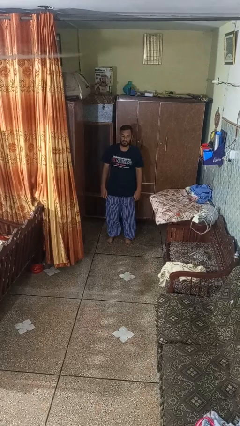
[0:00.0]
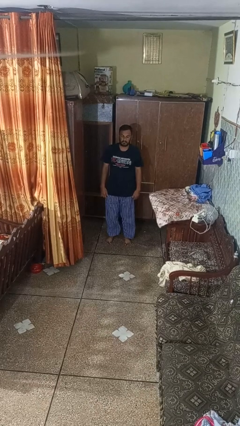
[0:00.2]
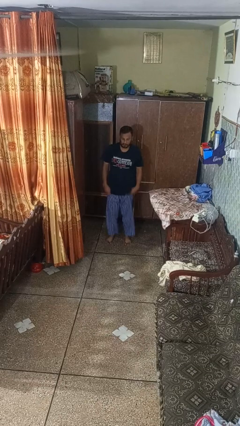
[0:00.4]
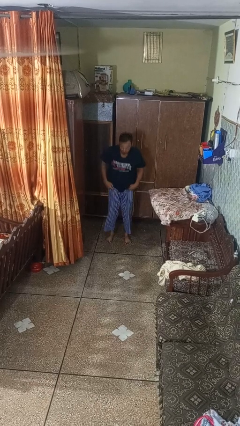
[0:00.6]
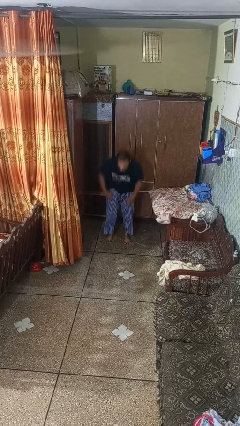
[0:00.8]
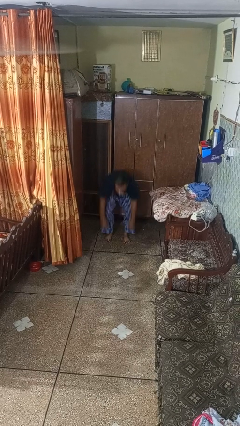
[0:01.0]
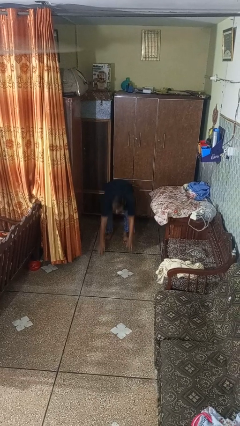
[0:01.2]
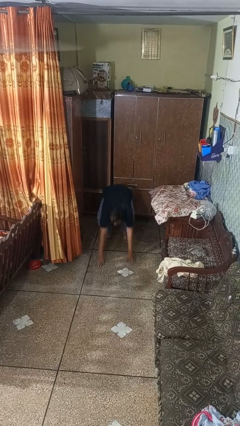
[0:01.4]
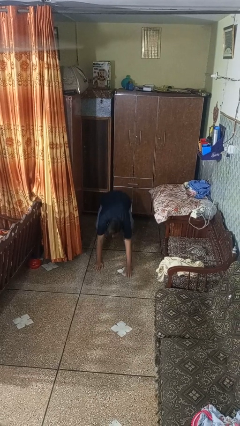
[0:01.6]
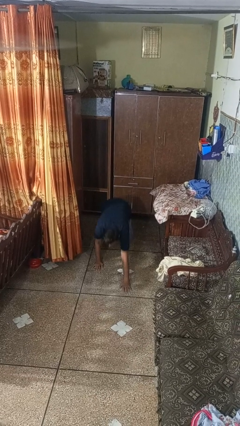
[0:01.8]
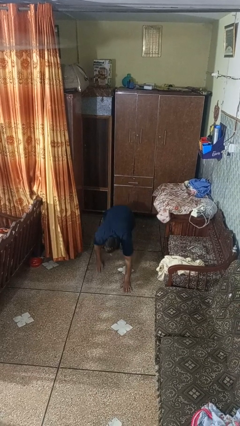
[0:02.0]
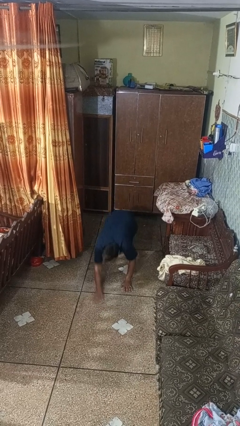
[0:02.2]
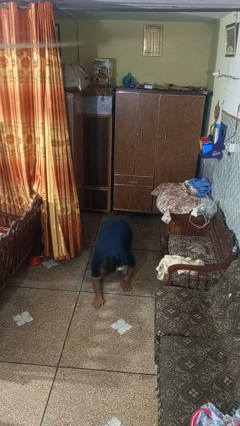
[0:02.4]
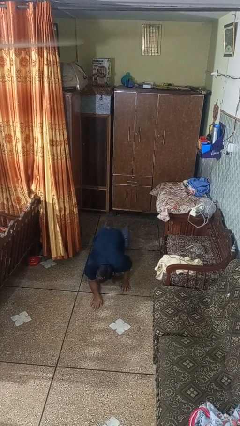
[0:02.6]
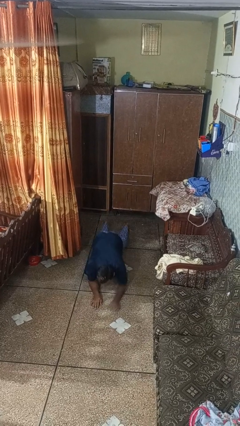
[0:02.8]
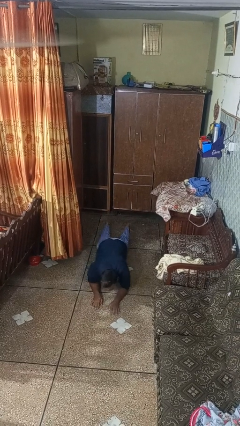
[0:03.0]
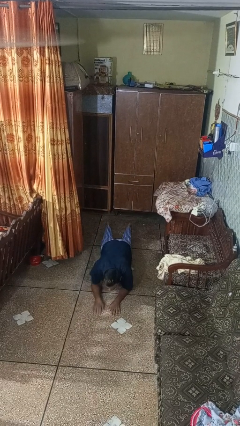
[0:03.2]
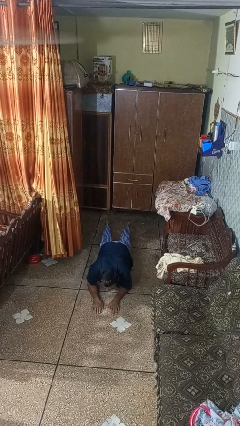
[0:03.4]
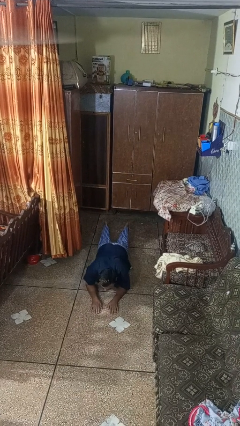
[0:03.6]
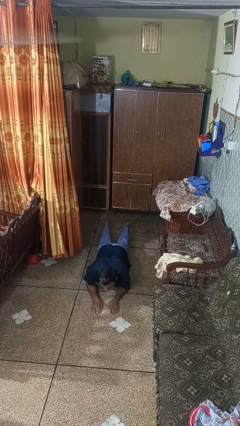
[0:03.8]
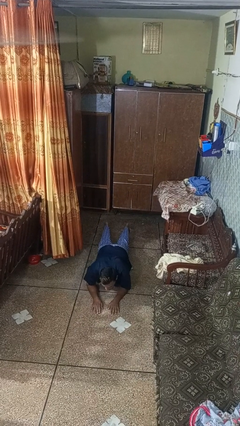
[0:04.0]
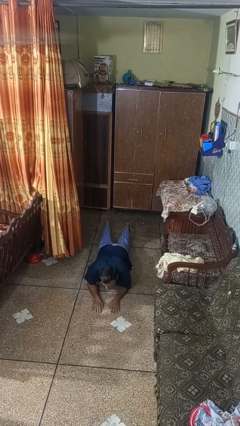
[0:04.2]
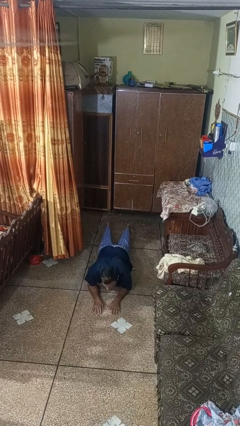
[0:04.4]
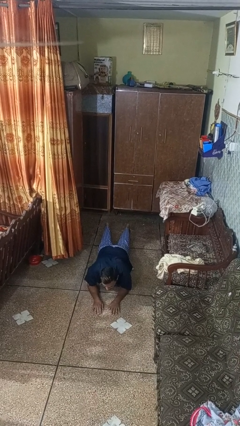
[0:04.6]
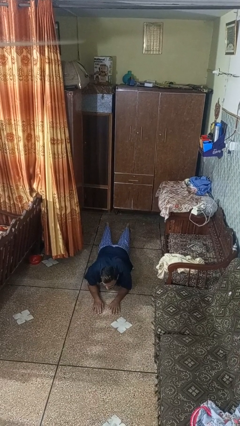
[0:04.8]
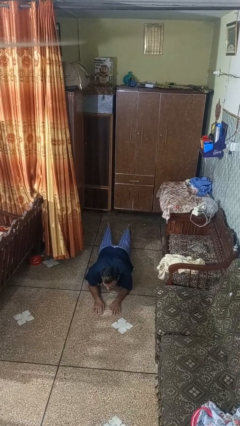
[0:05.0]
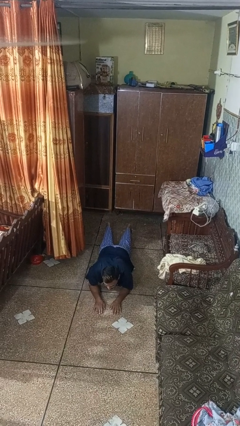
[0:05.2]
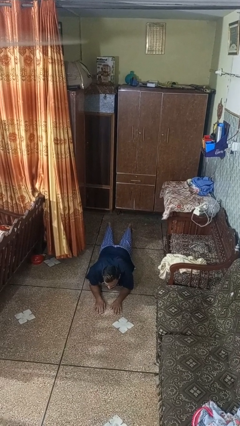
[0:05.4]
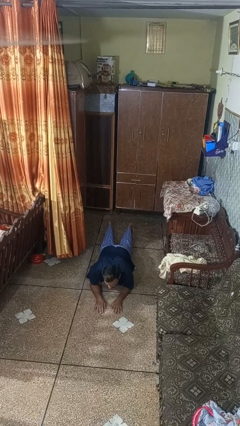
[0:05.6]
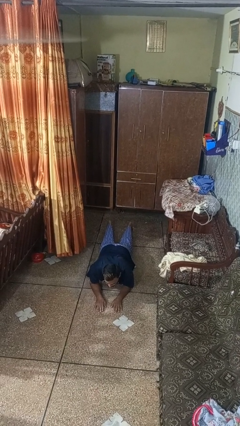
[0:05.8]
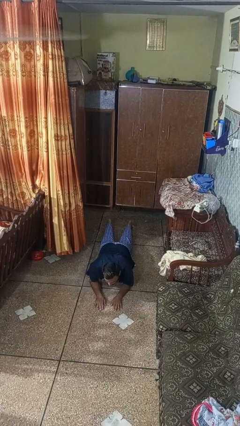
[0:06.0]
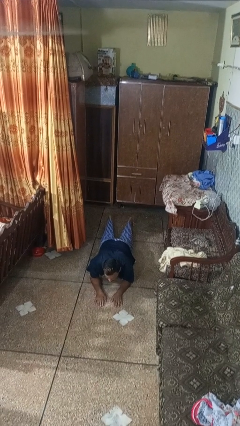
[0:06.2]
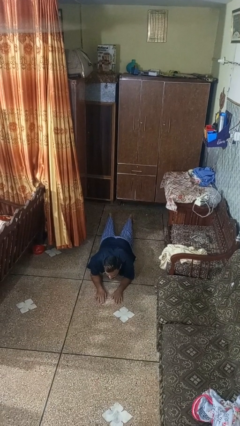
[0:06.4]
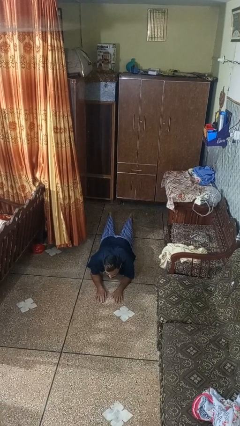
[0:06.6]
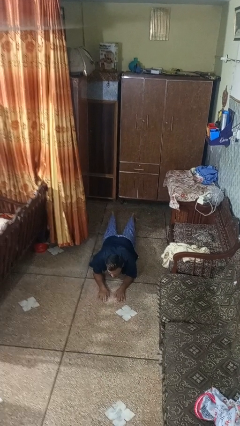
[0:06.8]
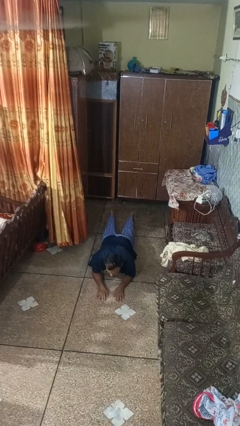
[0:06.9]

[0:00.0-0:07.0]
person exercises with plank

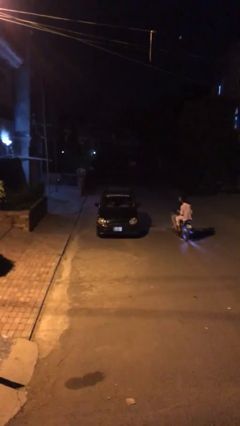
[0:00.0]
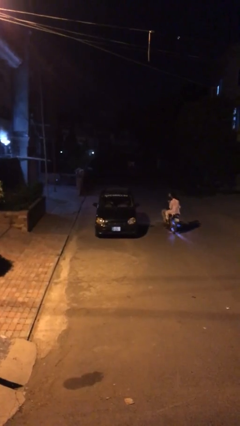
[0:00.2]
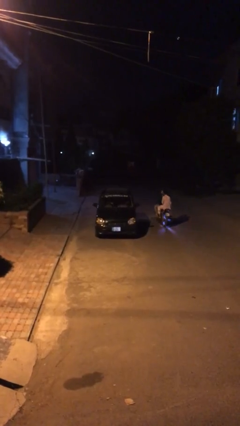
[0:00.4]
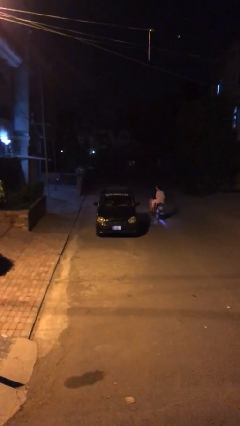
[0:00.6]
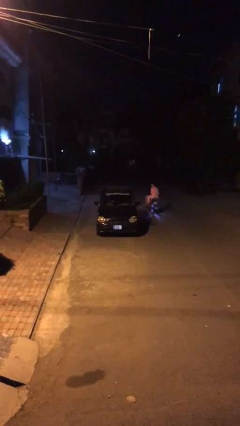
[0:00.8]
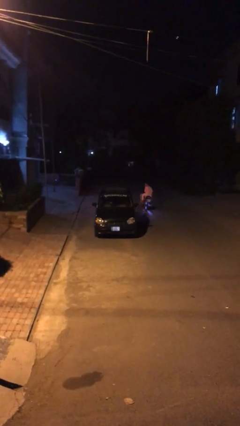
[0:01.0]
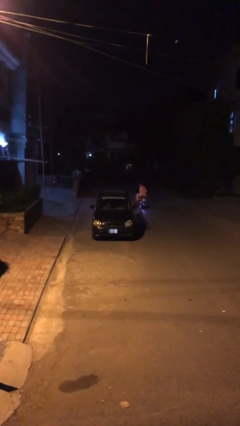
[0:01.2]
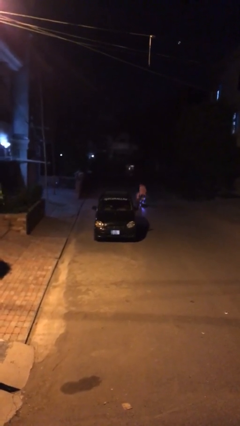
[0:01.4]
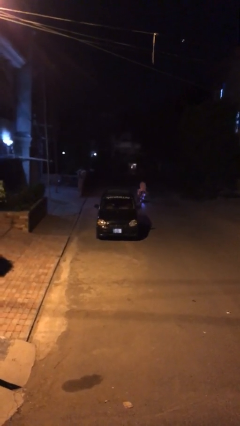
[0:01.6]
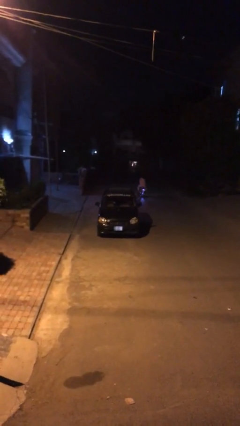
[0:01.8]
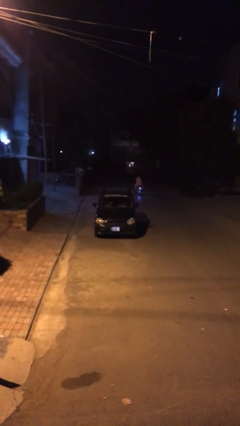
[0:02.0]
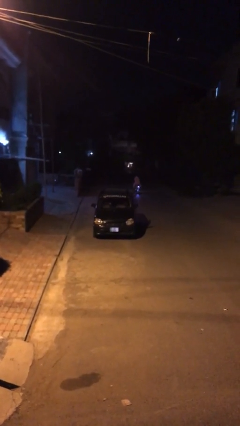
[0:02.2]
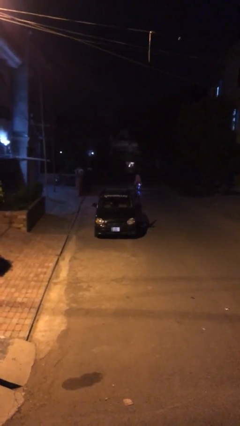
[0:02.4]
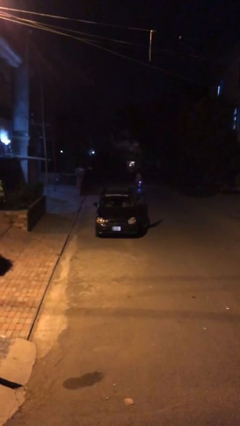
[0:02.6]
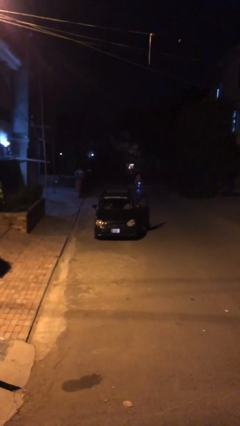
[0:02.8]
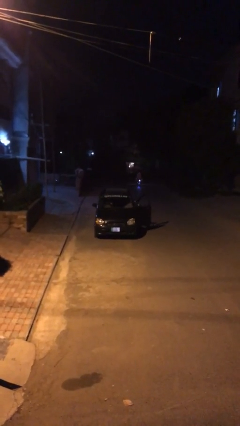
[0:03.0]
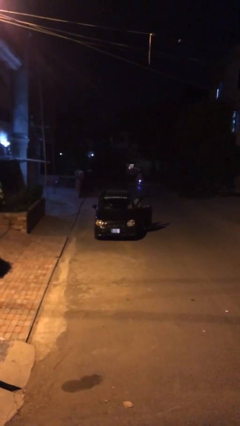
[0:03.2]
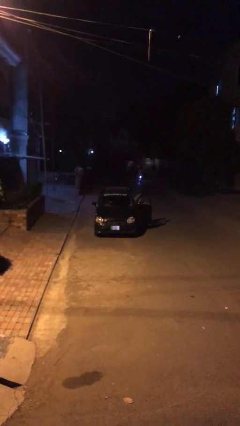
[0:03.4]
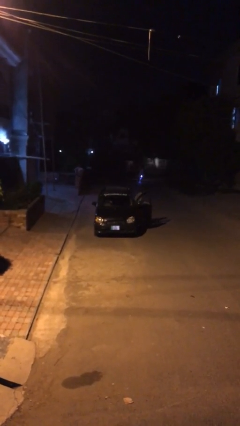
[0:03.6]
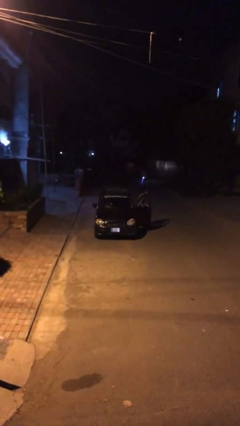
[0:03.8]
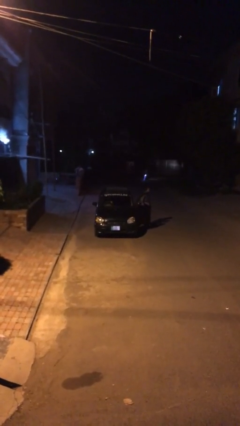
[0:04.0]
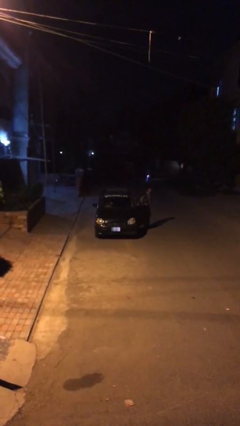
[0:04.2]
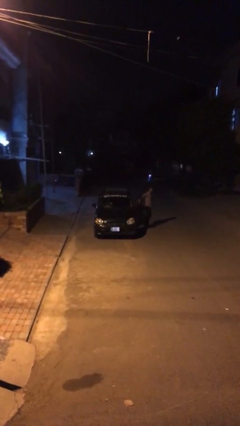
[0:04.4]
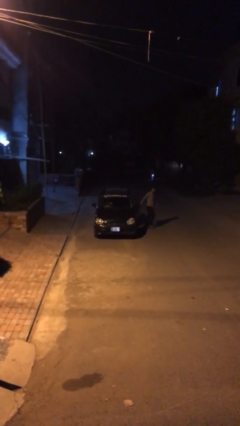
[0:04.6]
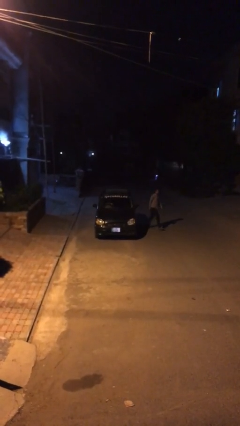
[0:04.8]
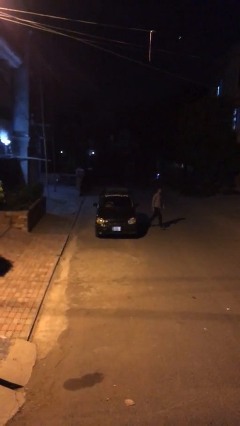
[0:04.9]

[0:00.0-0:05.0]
car drops off person

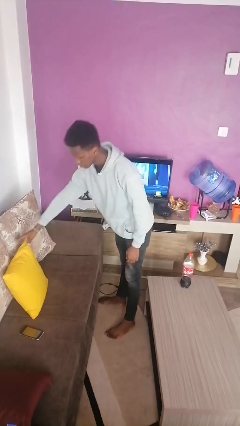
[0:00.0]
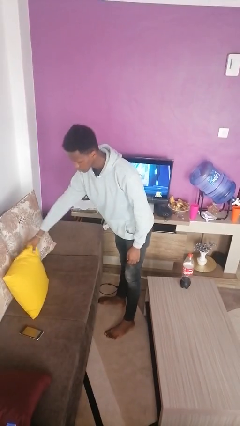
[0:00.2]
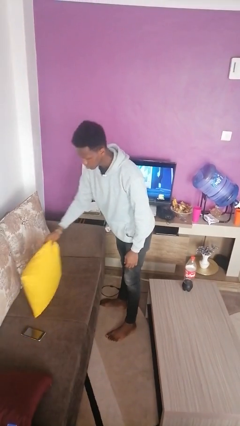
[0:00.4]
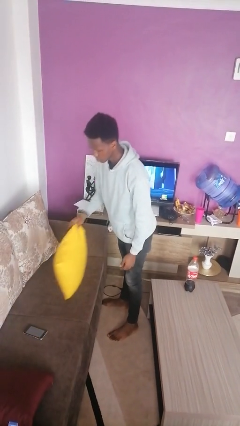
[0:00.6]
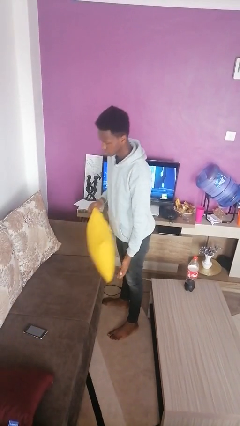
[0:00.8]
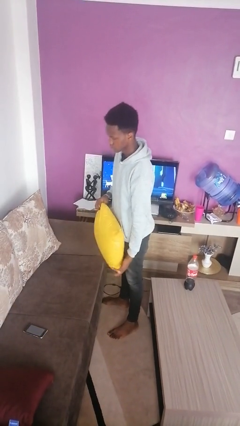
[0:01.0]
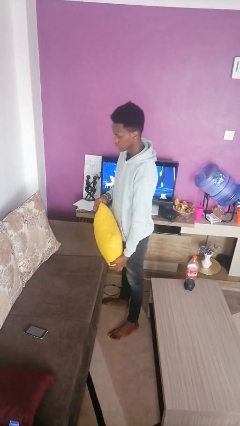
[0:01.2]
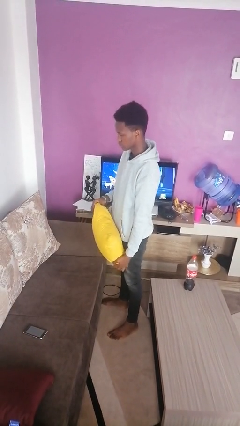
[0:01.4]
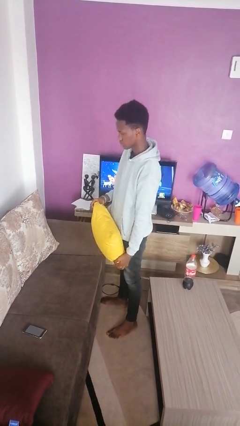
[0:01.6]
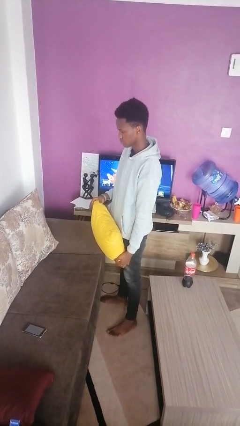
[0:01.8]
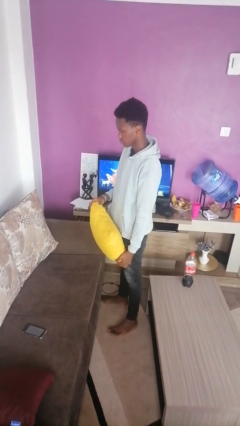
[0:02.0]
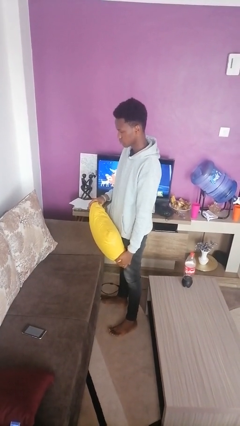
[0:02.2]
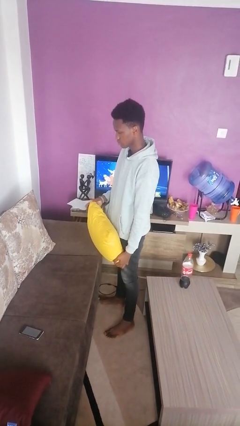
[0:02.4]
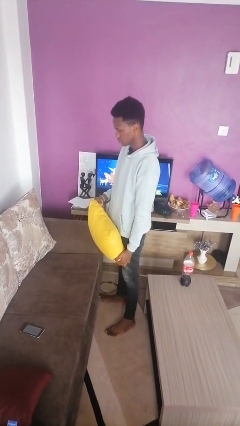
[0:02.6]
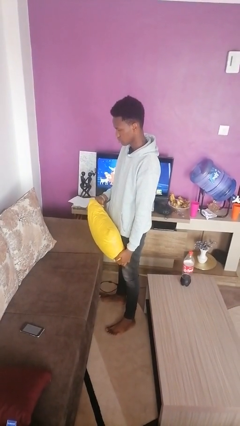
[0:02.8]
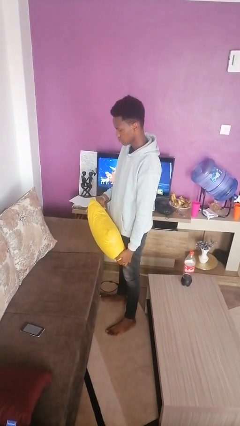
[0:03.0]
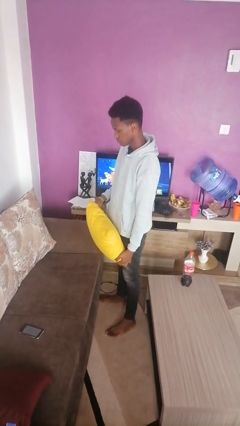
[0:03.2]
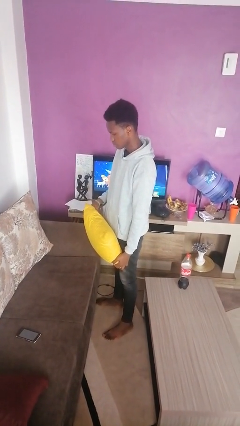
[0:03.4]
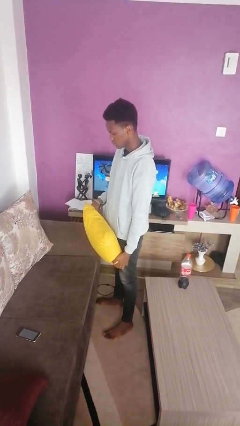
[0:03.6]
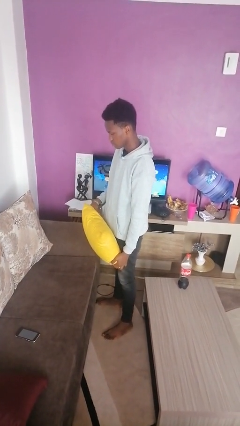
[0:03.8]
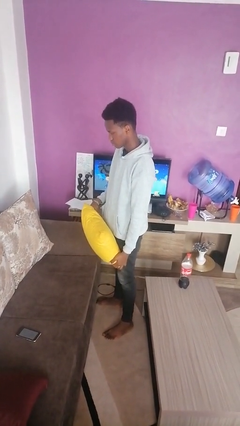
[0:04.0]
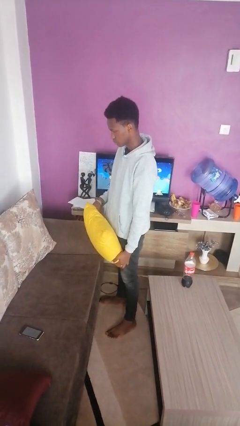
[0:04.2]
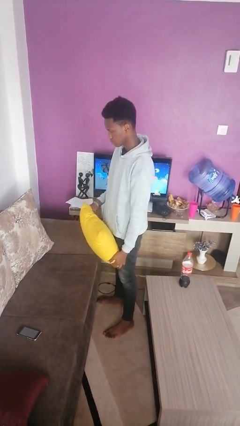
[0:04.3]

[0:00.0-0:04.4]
person picks up object from couch

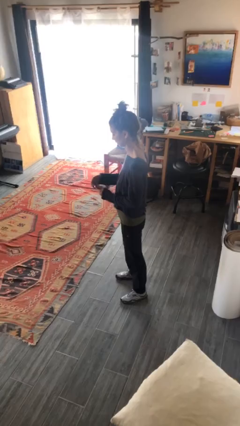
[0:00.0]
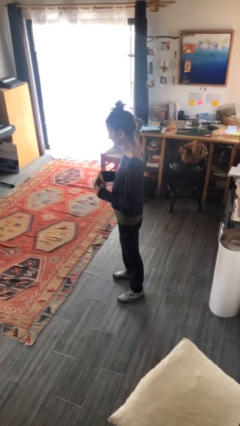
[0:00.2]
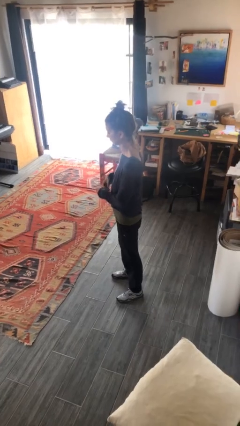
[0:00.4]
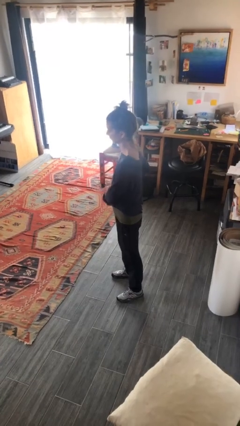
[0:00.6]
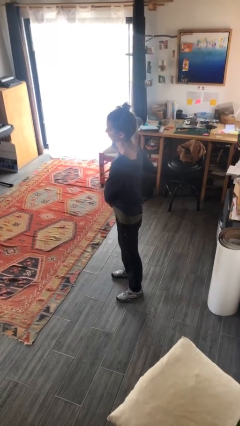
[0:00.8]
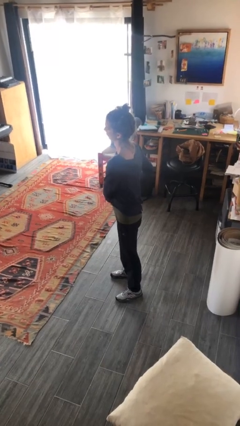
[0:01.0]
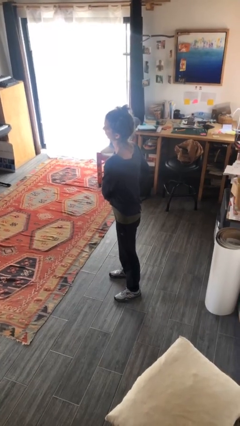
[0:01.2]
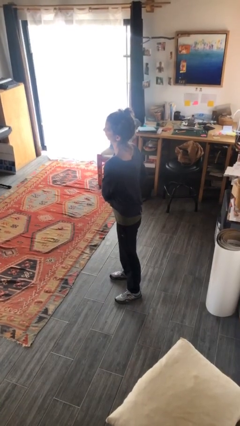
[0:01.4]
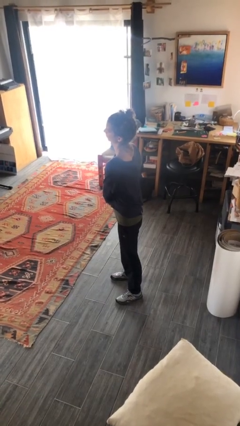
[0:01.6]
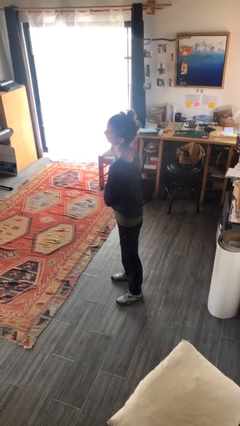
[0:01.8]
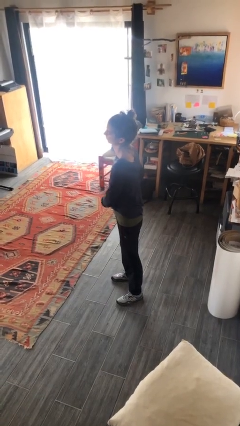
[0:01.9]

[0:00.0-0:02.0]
person puts phone into pocket
